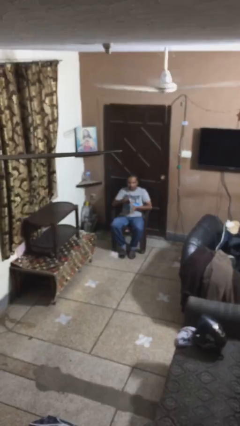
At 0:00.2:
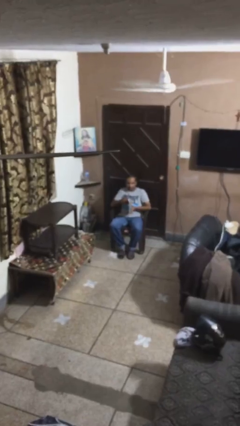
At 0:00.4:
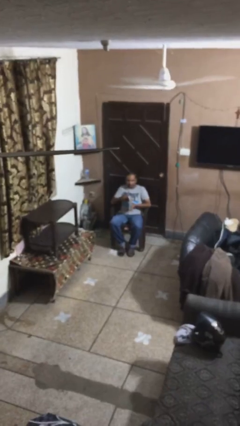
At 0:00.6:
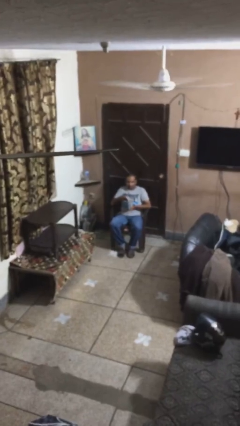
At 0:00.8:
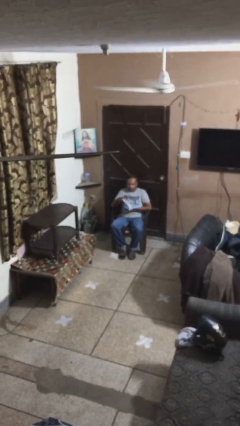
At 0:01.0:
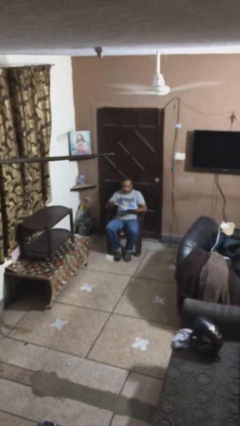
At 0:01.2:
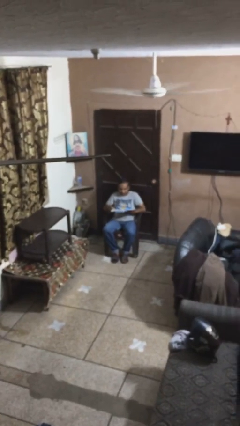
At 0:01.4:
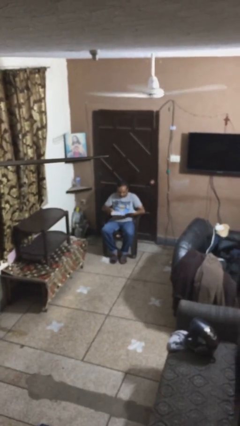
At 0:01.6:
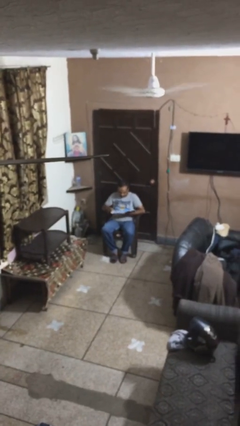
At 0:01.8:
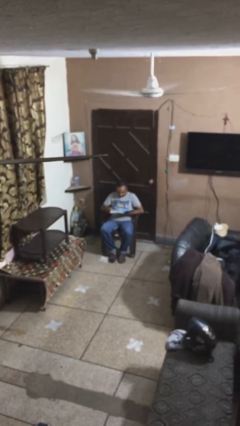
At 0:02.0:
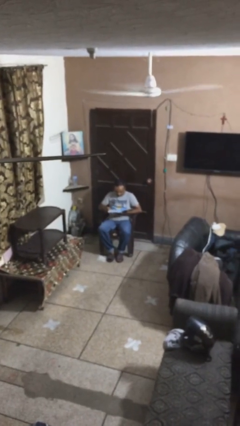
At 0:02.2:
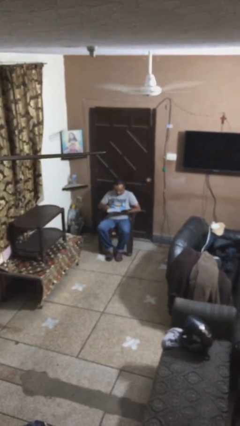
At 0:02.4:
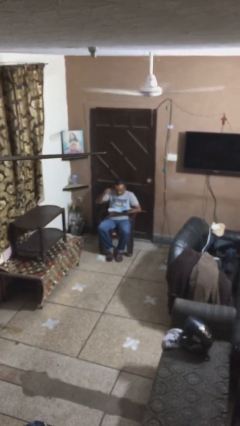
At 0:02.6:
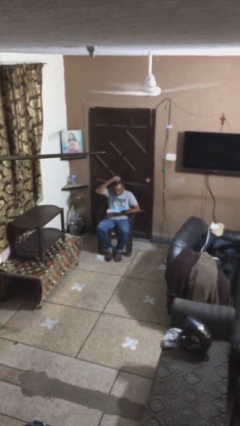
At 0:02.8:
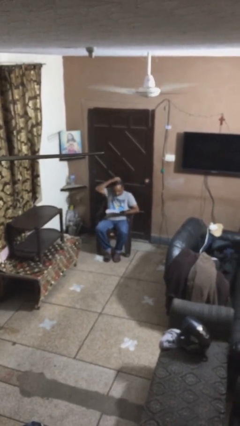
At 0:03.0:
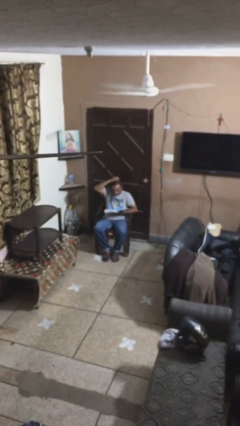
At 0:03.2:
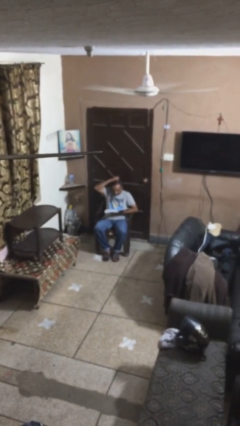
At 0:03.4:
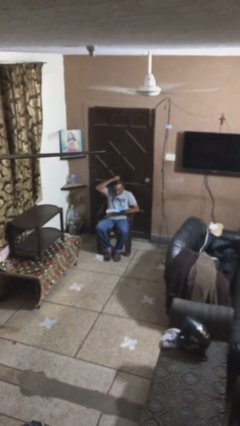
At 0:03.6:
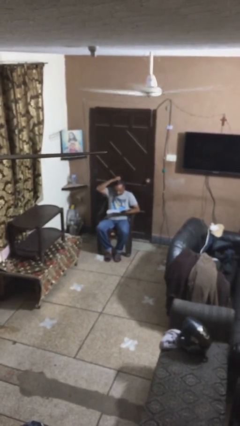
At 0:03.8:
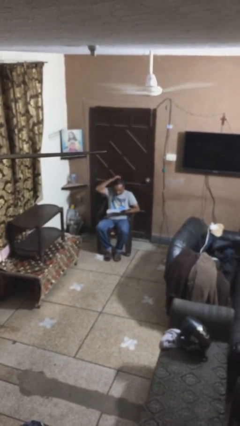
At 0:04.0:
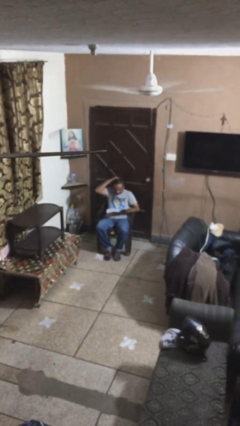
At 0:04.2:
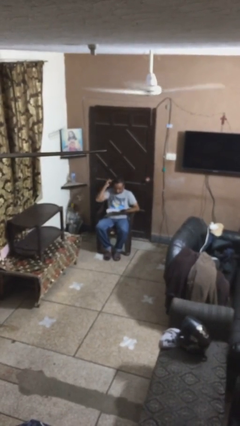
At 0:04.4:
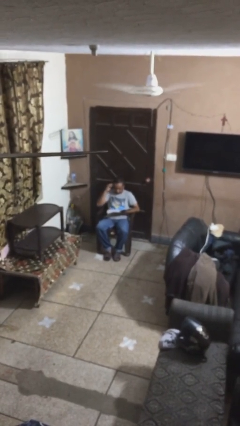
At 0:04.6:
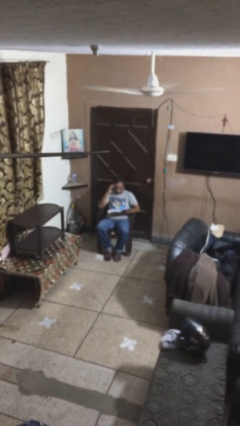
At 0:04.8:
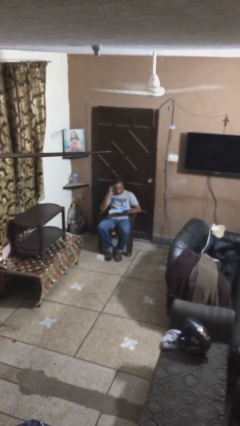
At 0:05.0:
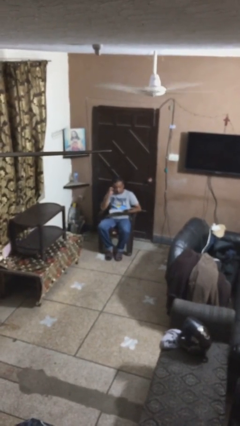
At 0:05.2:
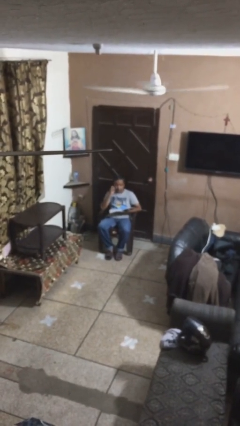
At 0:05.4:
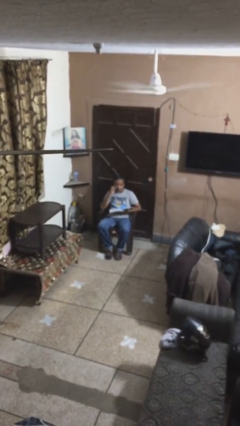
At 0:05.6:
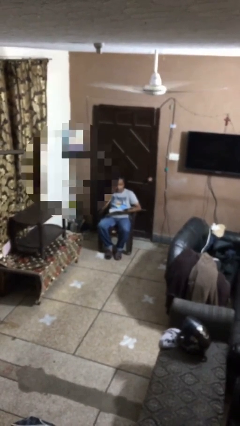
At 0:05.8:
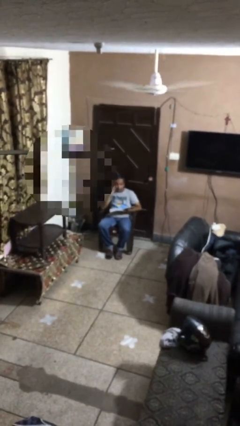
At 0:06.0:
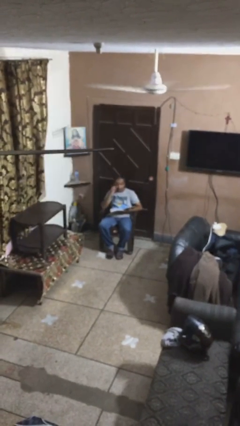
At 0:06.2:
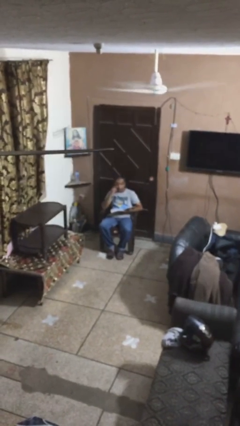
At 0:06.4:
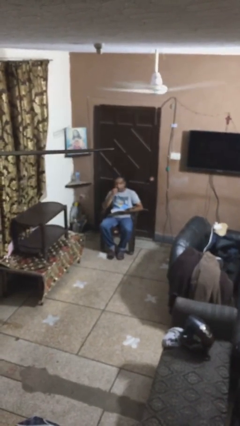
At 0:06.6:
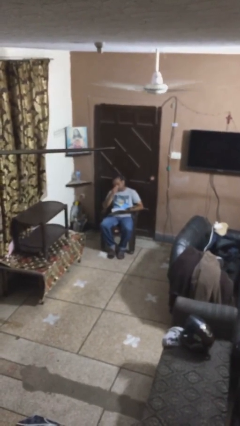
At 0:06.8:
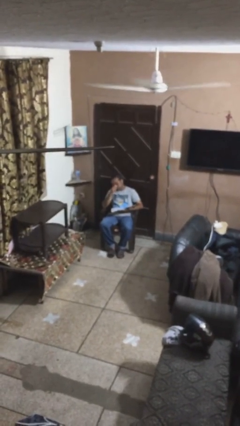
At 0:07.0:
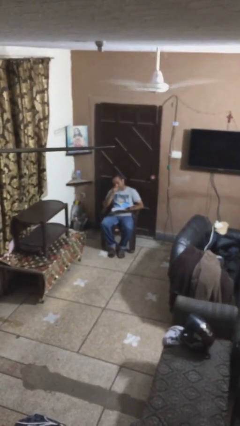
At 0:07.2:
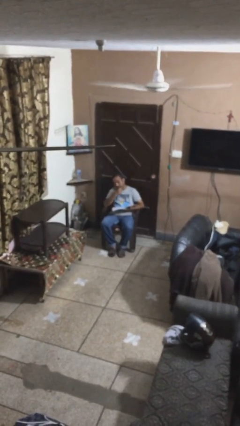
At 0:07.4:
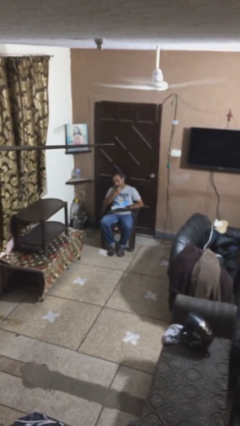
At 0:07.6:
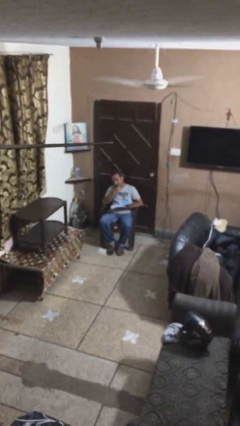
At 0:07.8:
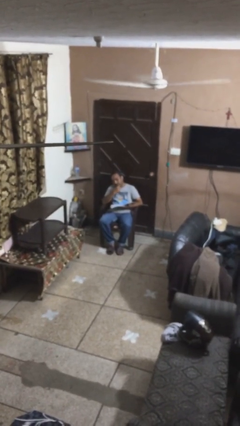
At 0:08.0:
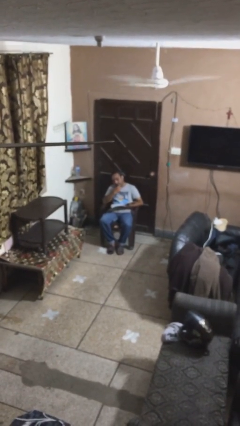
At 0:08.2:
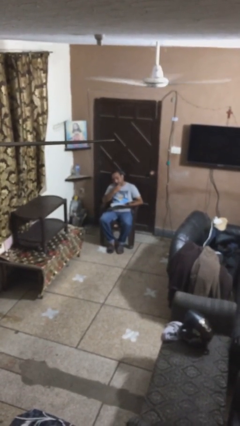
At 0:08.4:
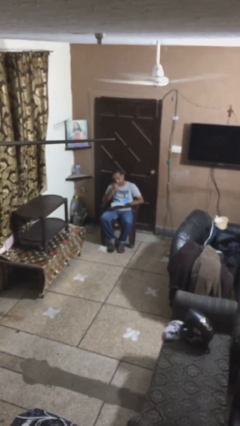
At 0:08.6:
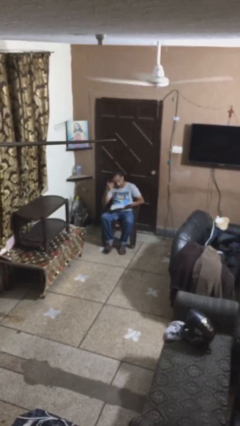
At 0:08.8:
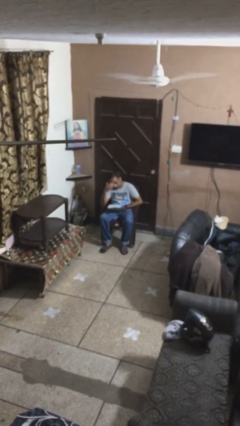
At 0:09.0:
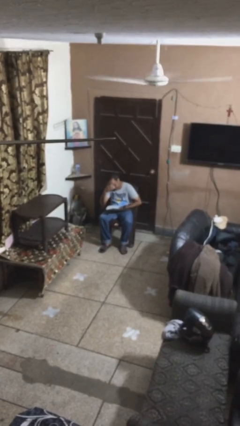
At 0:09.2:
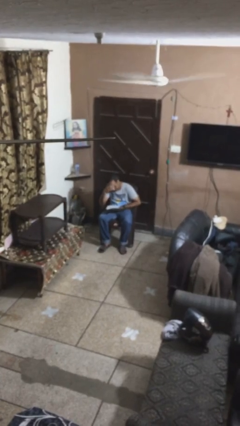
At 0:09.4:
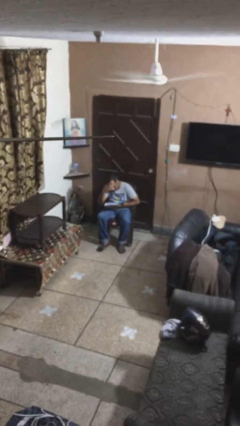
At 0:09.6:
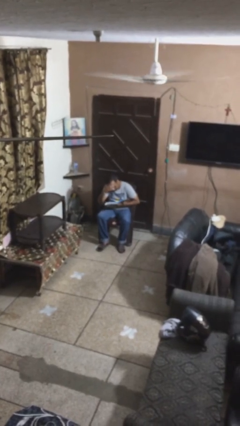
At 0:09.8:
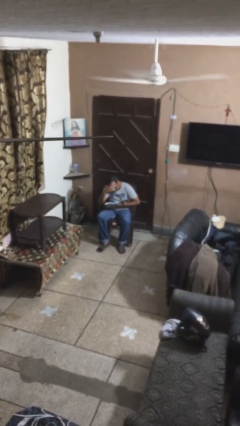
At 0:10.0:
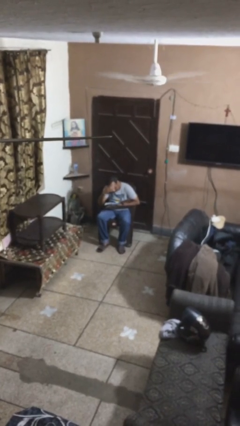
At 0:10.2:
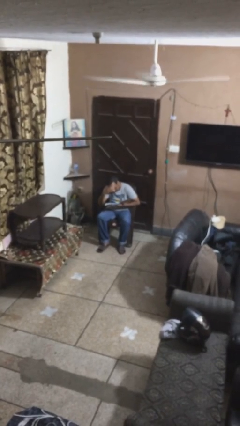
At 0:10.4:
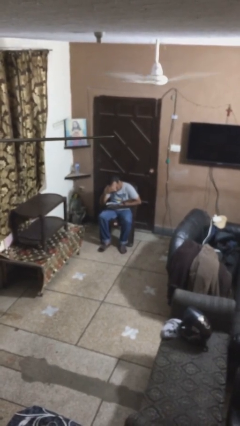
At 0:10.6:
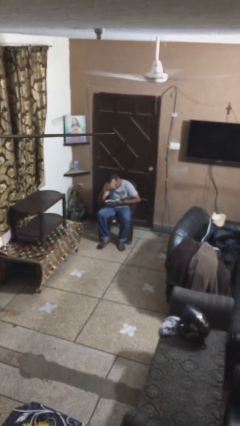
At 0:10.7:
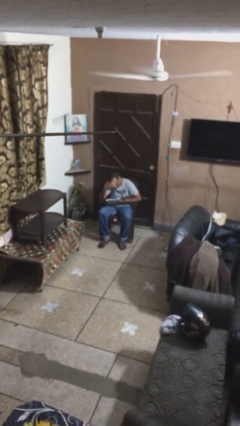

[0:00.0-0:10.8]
person reads document

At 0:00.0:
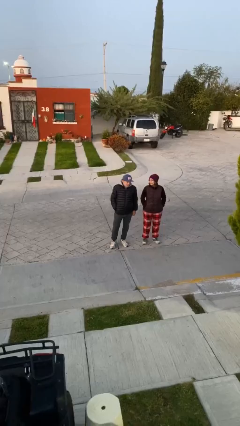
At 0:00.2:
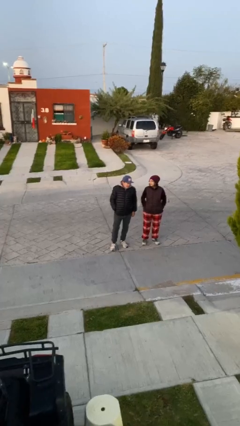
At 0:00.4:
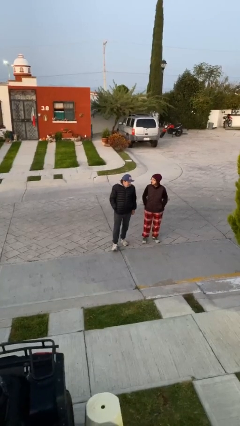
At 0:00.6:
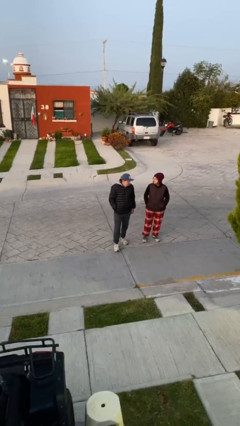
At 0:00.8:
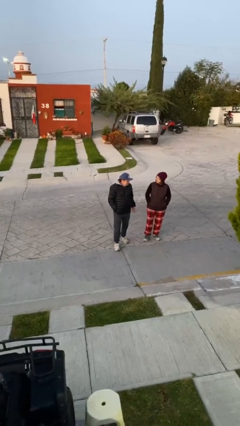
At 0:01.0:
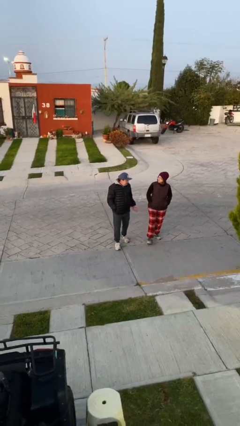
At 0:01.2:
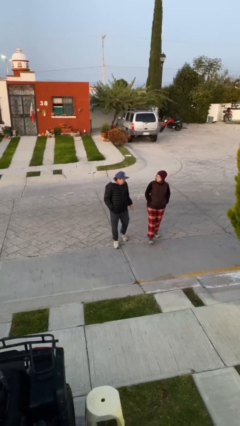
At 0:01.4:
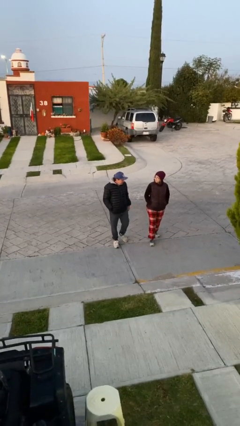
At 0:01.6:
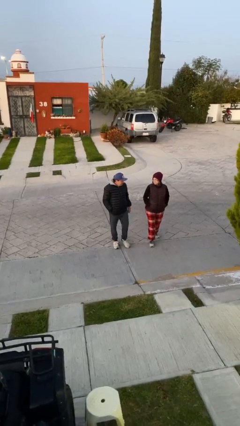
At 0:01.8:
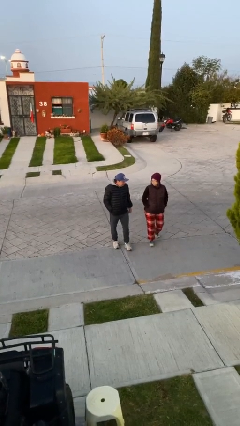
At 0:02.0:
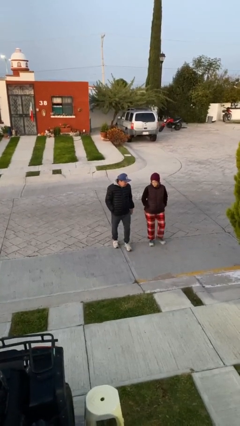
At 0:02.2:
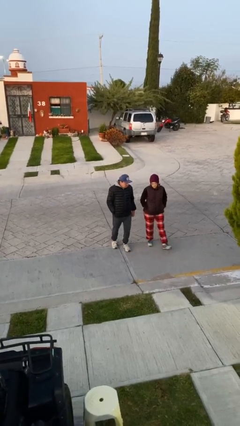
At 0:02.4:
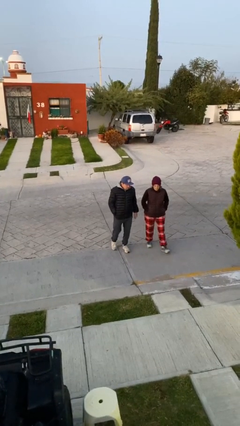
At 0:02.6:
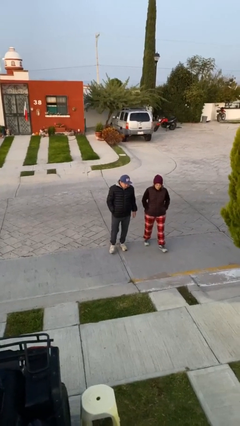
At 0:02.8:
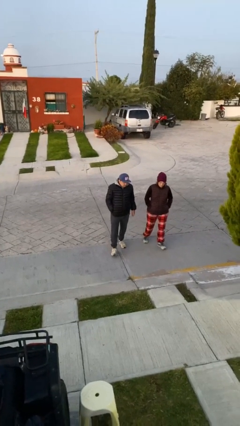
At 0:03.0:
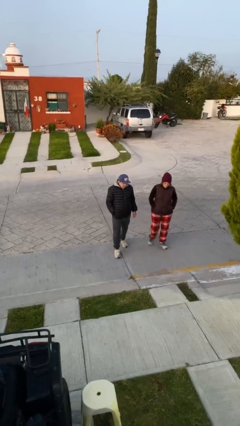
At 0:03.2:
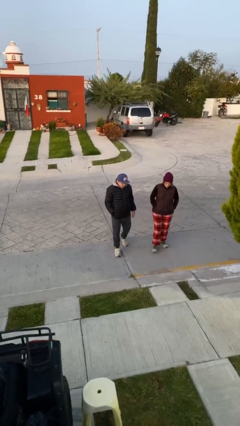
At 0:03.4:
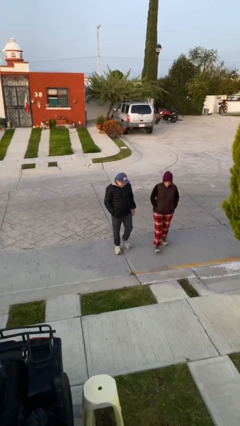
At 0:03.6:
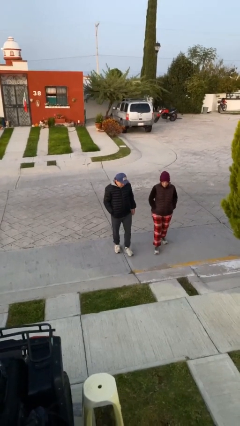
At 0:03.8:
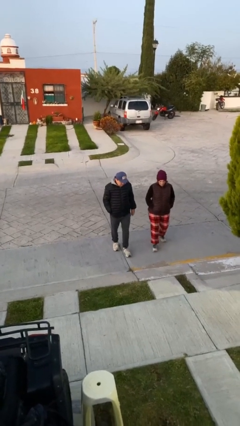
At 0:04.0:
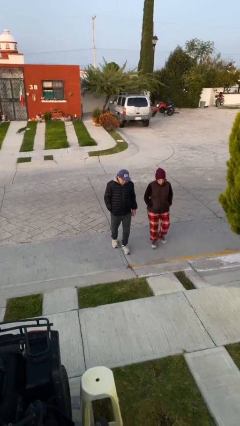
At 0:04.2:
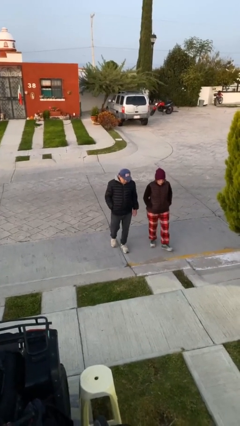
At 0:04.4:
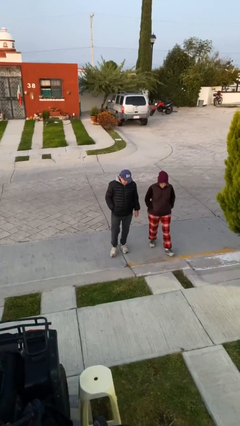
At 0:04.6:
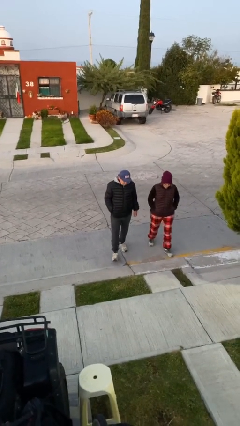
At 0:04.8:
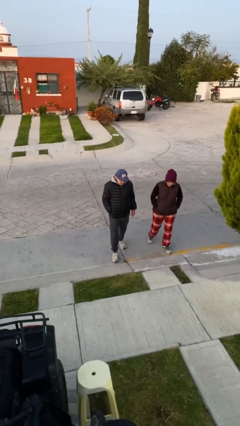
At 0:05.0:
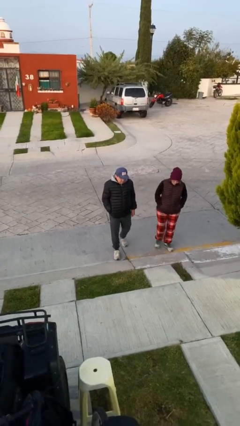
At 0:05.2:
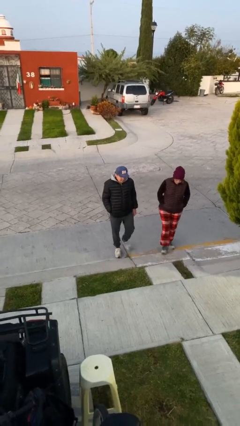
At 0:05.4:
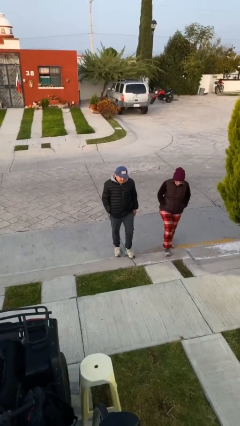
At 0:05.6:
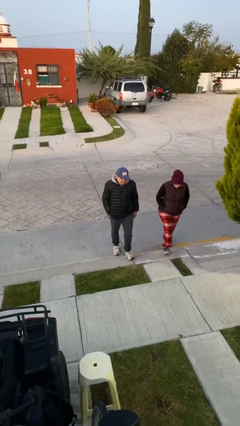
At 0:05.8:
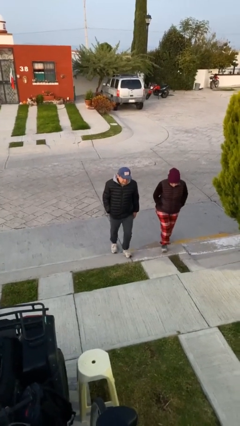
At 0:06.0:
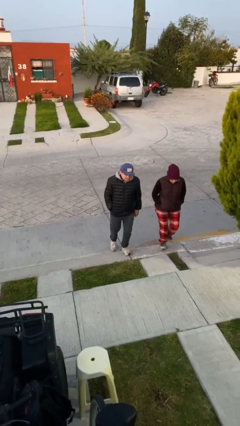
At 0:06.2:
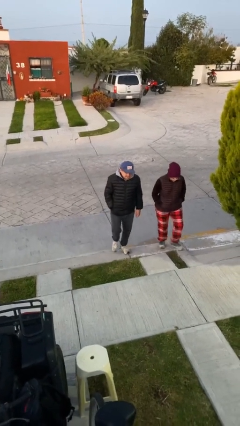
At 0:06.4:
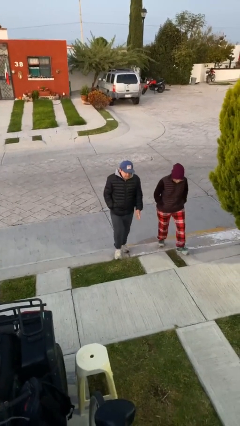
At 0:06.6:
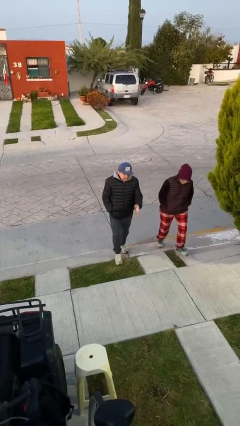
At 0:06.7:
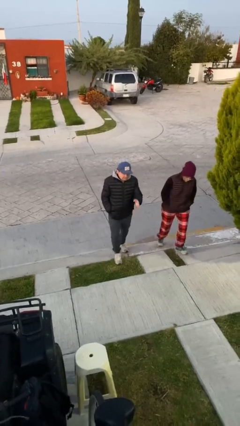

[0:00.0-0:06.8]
person talks to person

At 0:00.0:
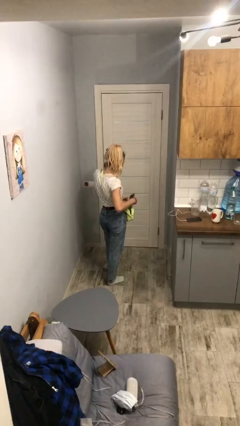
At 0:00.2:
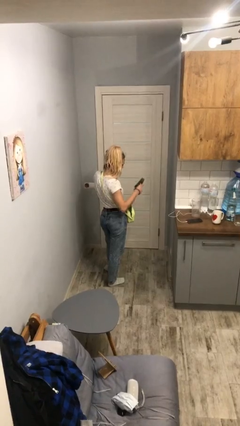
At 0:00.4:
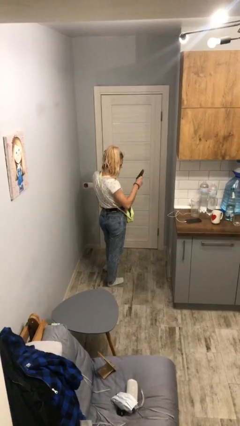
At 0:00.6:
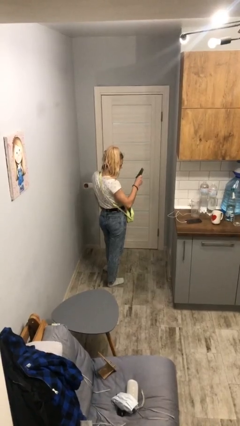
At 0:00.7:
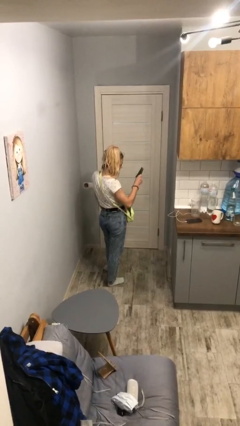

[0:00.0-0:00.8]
person takes object from purse
